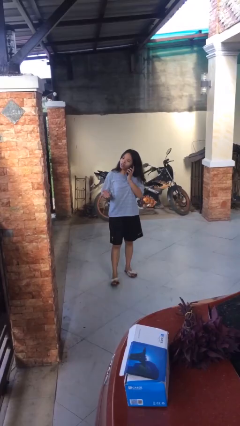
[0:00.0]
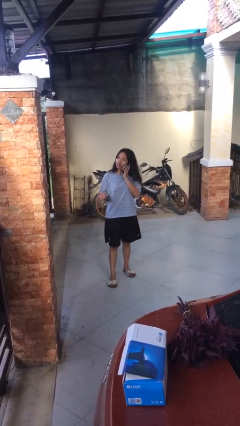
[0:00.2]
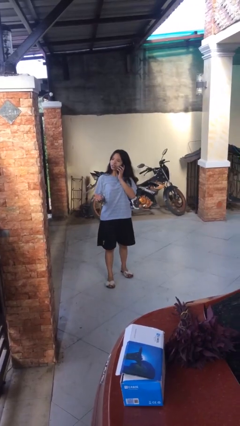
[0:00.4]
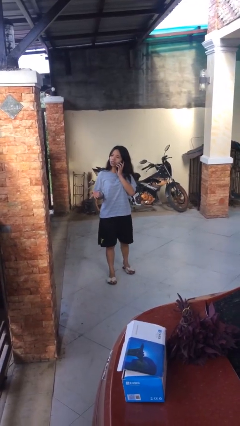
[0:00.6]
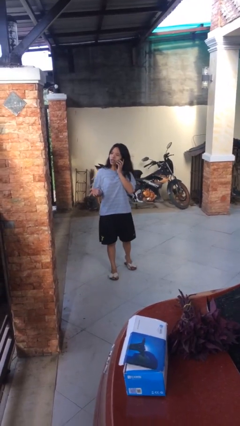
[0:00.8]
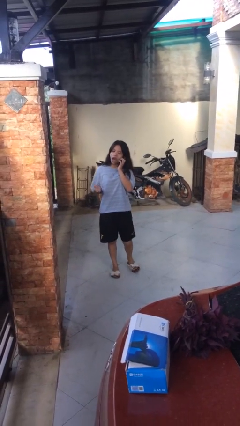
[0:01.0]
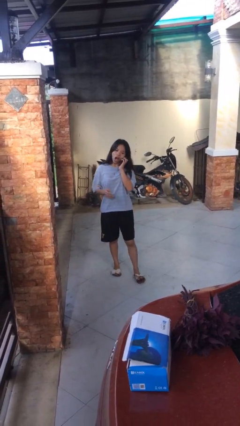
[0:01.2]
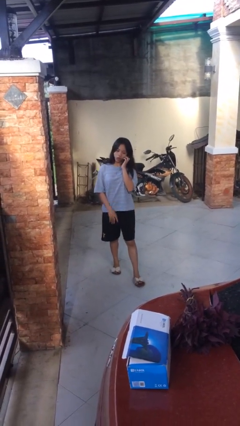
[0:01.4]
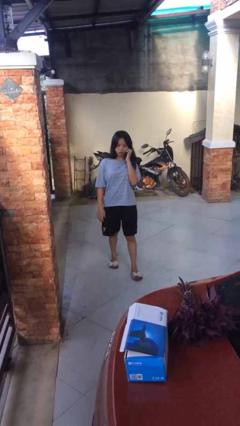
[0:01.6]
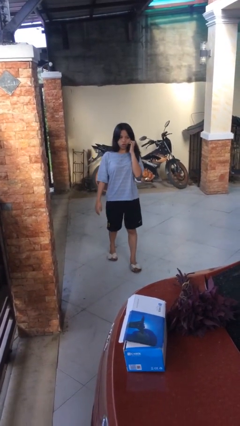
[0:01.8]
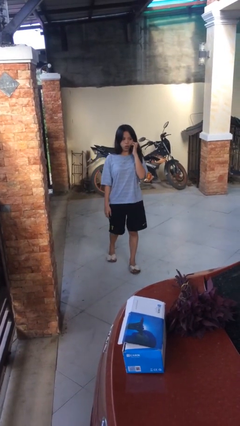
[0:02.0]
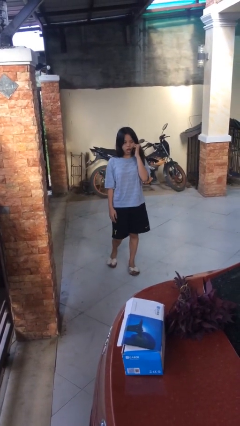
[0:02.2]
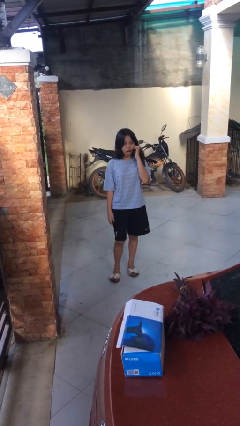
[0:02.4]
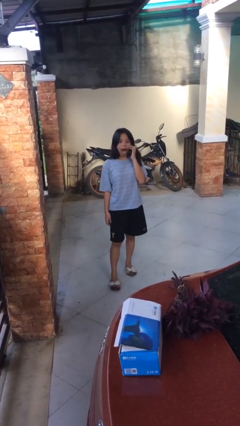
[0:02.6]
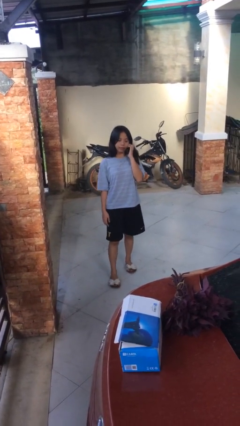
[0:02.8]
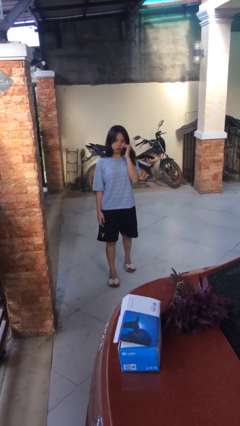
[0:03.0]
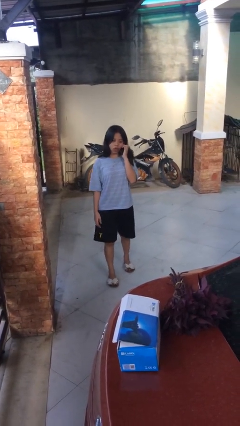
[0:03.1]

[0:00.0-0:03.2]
person talks on phone

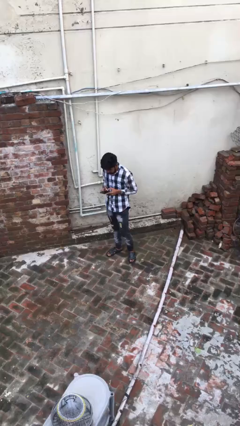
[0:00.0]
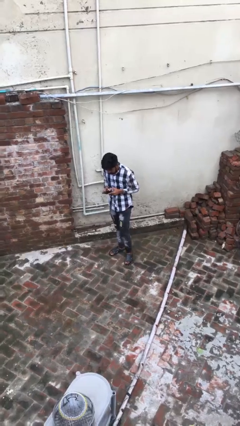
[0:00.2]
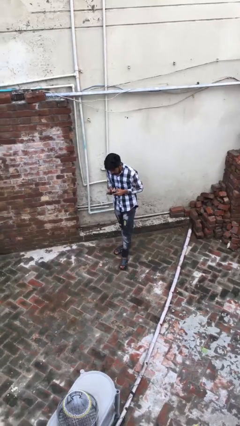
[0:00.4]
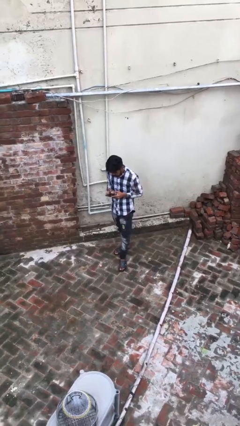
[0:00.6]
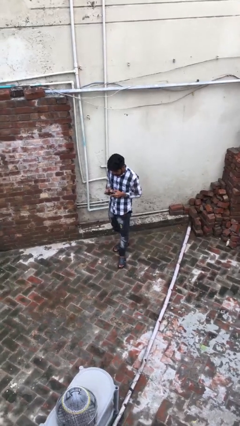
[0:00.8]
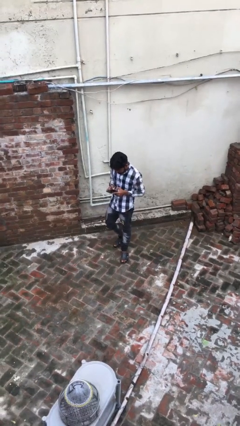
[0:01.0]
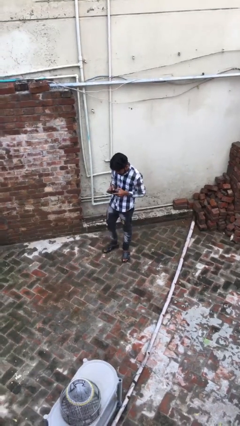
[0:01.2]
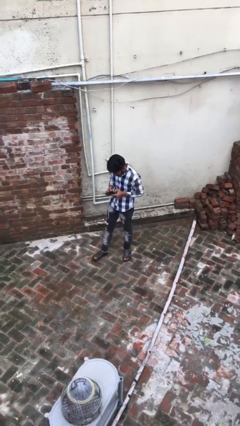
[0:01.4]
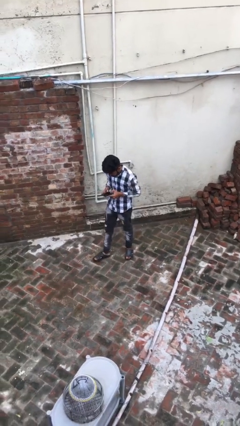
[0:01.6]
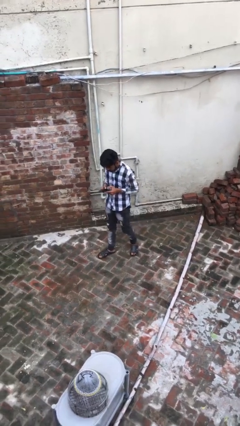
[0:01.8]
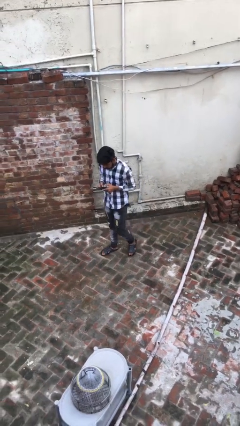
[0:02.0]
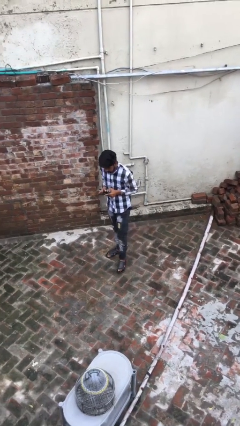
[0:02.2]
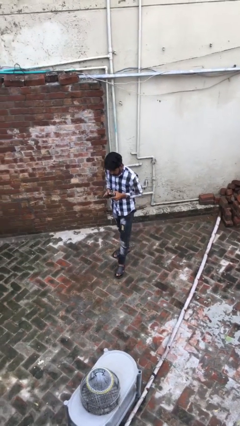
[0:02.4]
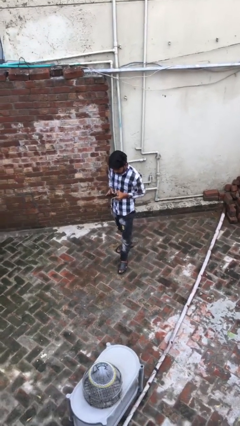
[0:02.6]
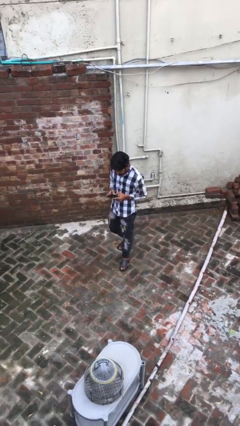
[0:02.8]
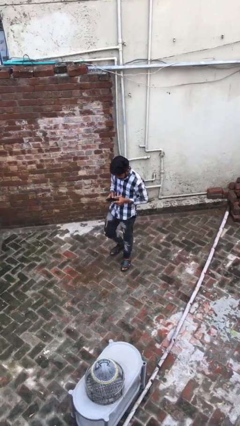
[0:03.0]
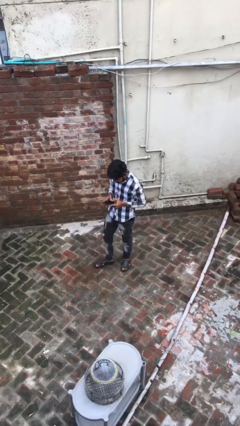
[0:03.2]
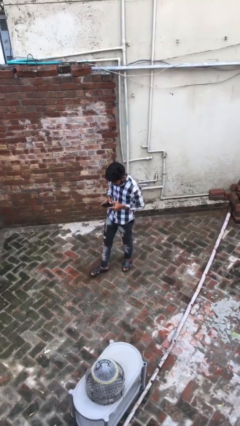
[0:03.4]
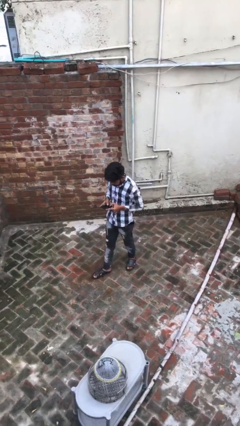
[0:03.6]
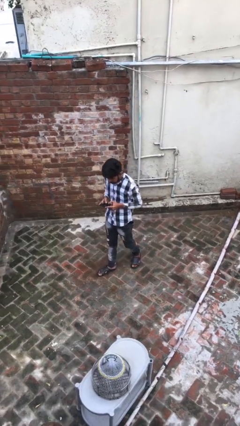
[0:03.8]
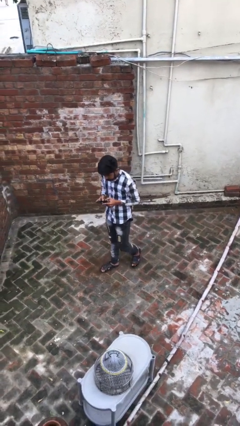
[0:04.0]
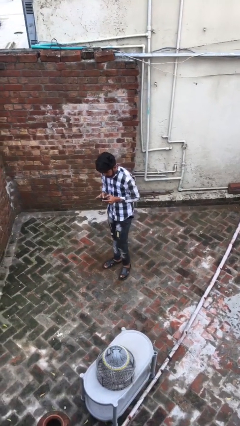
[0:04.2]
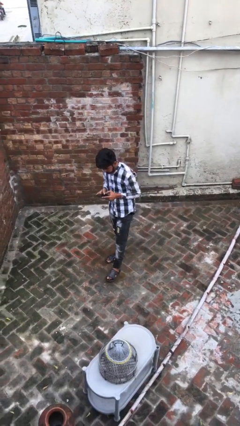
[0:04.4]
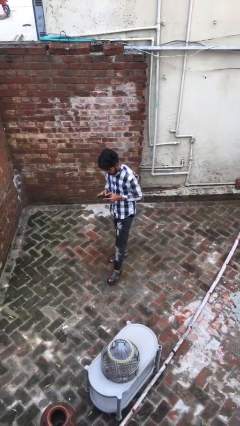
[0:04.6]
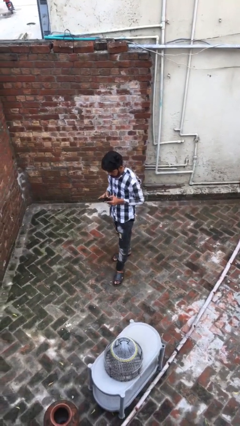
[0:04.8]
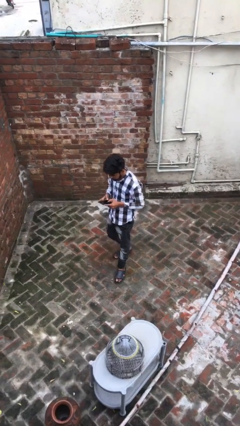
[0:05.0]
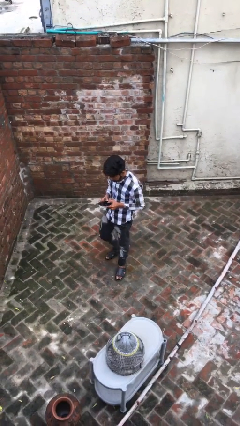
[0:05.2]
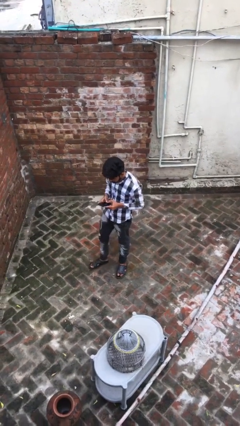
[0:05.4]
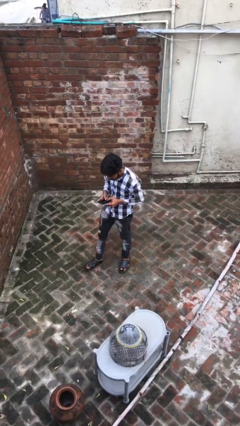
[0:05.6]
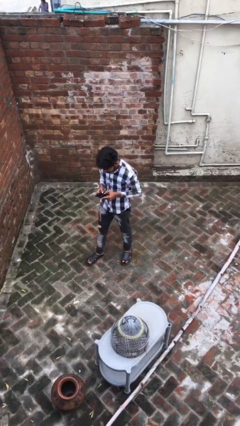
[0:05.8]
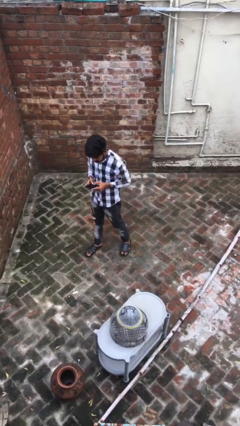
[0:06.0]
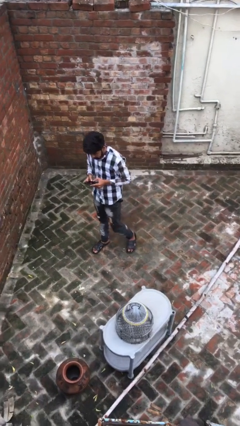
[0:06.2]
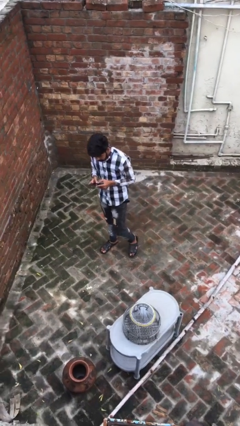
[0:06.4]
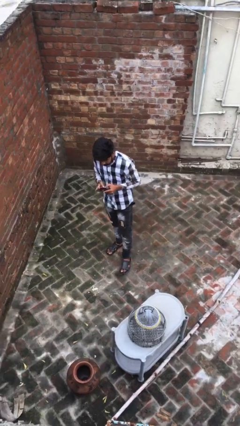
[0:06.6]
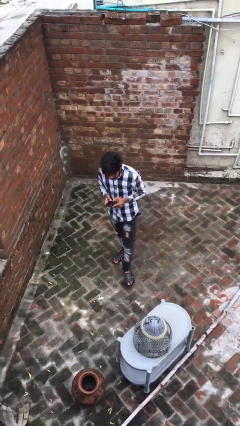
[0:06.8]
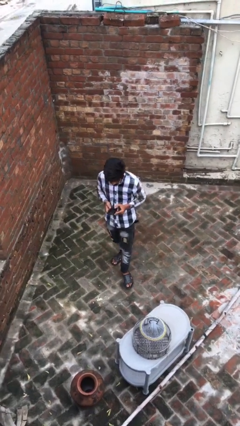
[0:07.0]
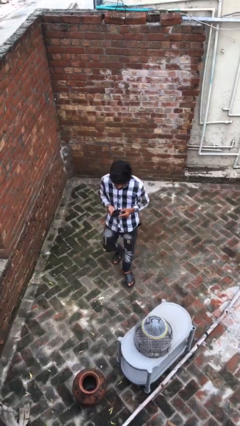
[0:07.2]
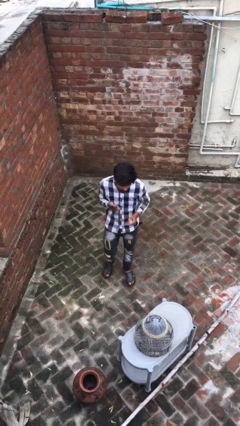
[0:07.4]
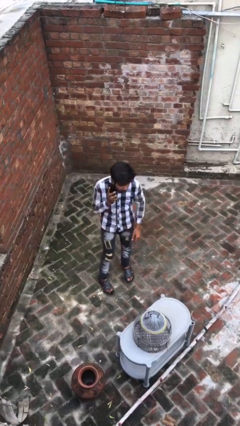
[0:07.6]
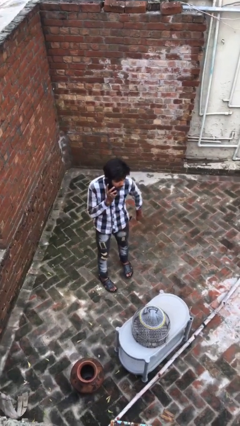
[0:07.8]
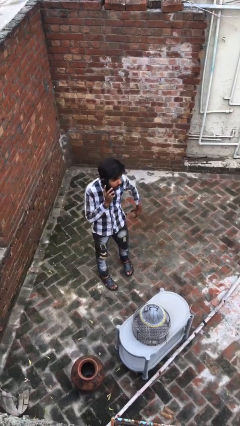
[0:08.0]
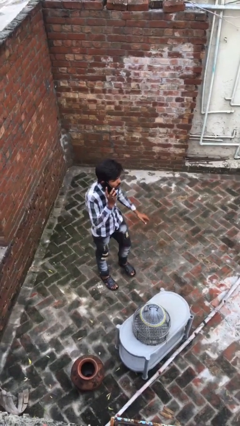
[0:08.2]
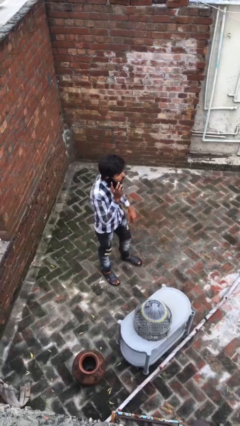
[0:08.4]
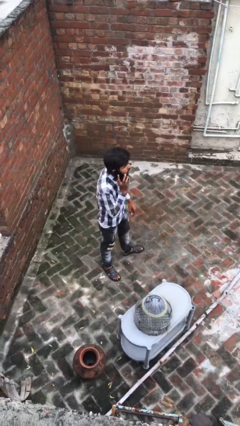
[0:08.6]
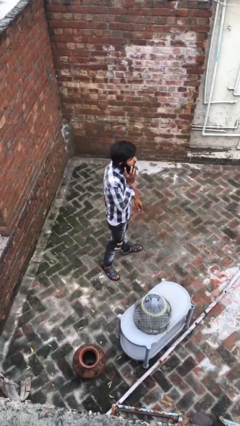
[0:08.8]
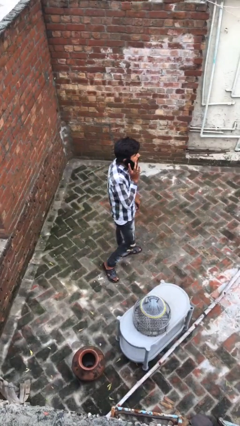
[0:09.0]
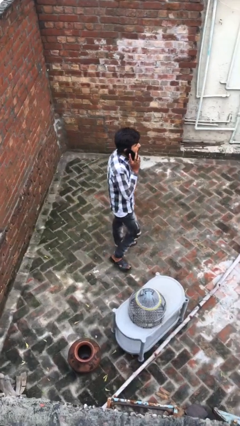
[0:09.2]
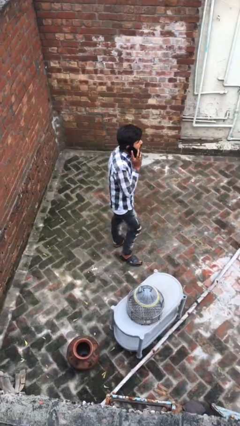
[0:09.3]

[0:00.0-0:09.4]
person texts on phone

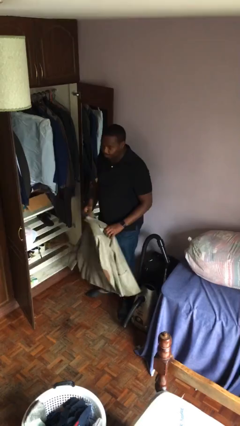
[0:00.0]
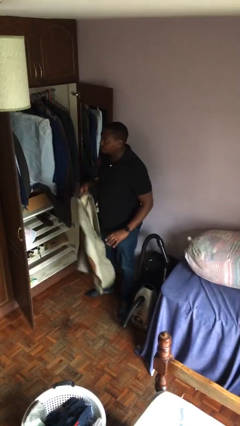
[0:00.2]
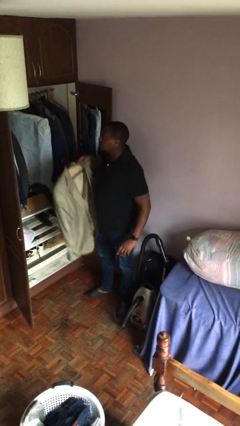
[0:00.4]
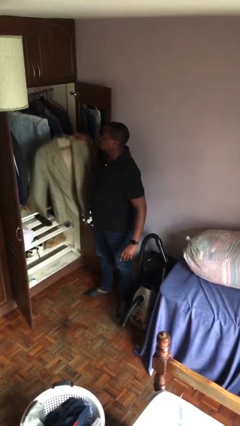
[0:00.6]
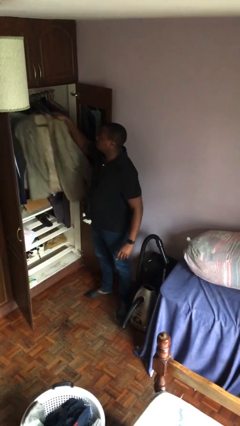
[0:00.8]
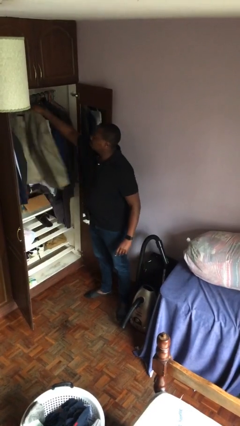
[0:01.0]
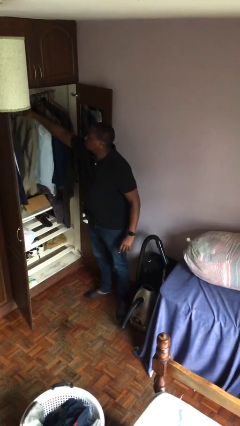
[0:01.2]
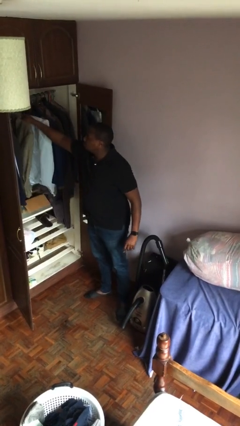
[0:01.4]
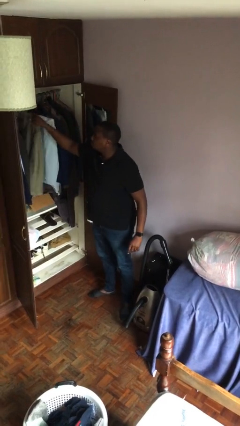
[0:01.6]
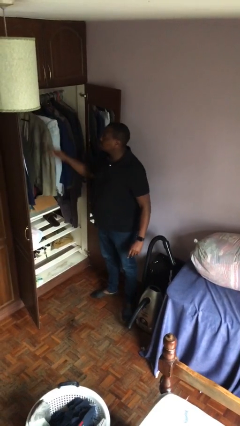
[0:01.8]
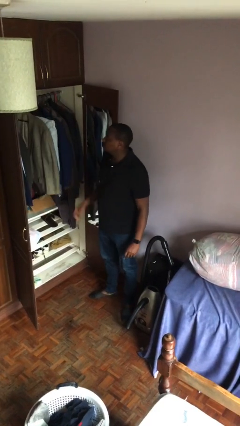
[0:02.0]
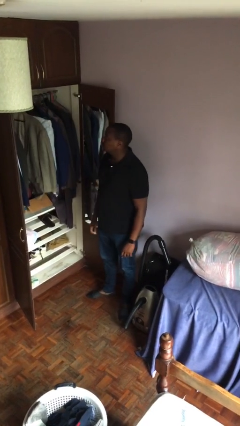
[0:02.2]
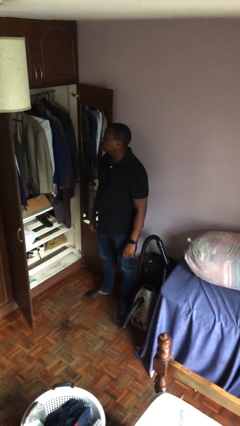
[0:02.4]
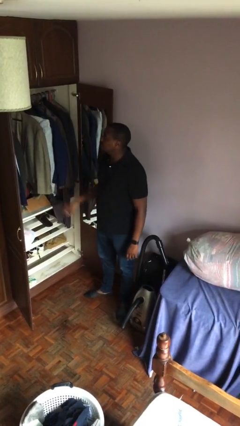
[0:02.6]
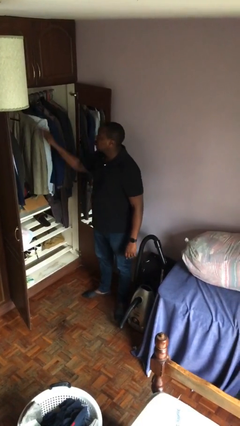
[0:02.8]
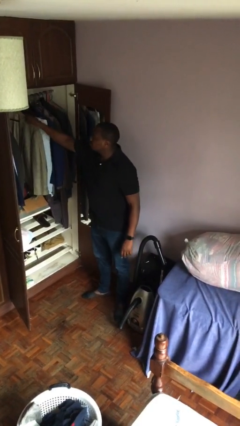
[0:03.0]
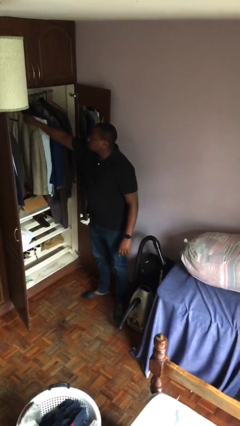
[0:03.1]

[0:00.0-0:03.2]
person puts clothes into closet

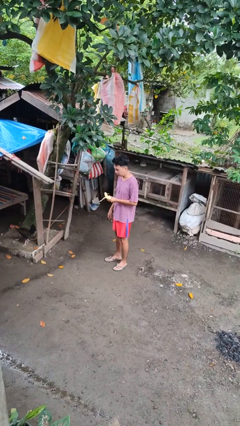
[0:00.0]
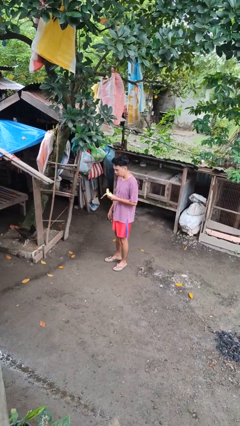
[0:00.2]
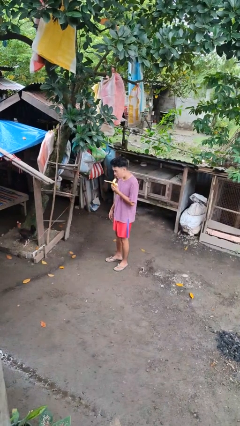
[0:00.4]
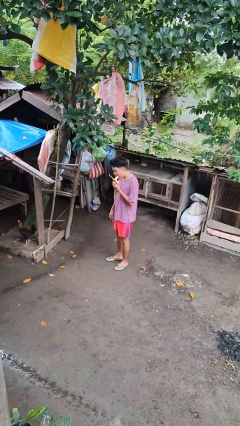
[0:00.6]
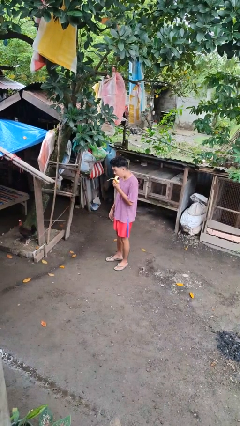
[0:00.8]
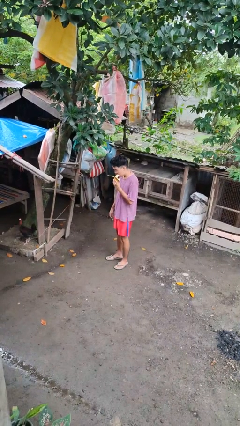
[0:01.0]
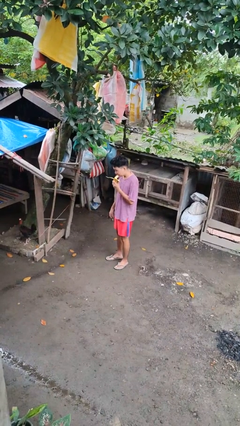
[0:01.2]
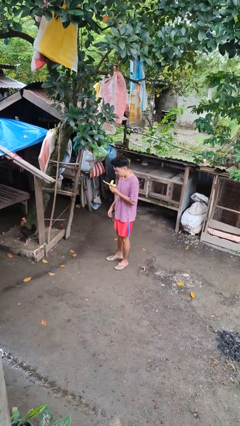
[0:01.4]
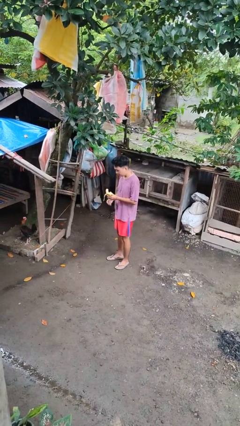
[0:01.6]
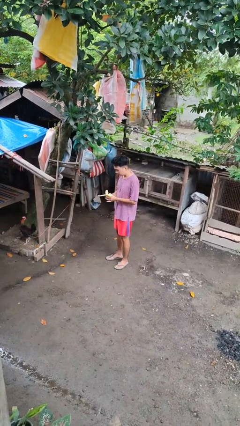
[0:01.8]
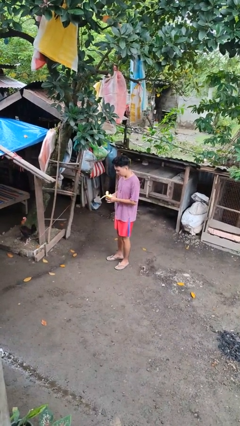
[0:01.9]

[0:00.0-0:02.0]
person eats banana
